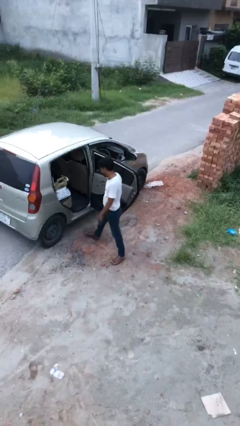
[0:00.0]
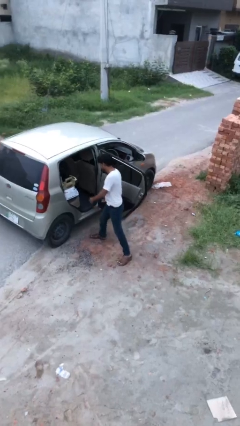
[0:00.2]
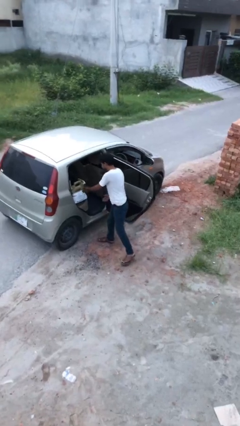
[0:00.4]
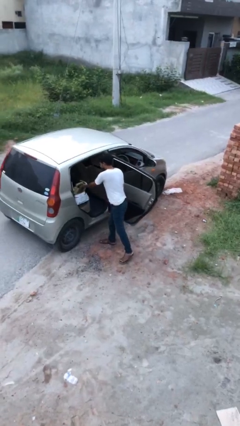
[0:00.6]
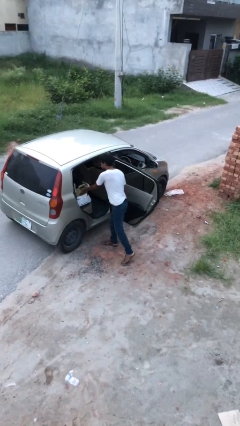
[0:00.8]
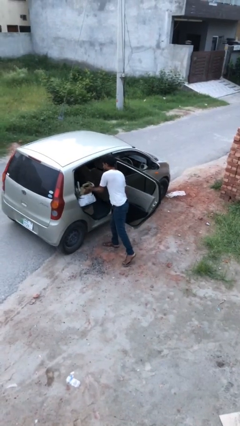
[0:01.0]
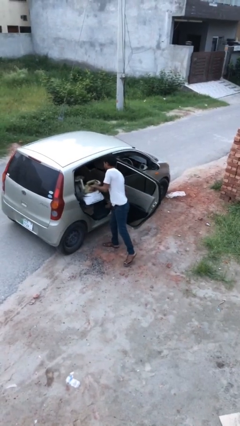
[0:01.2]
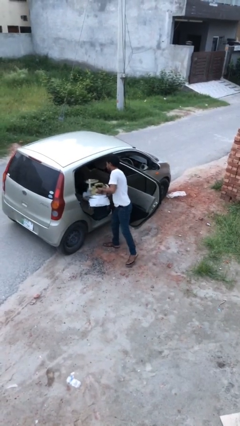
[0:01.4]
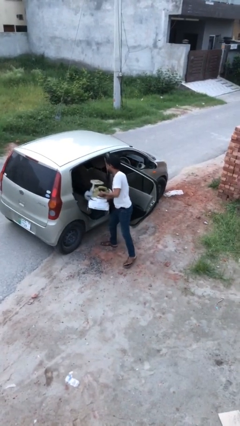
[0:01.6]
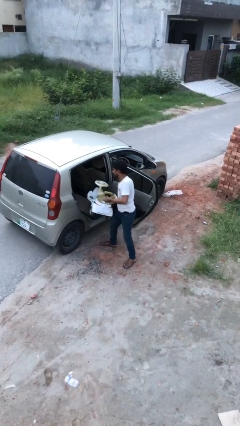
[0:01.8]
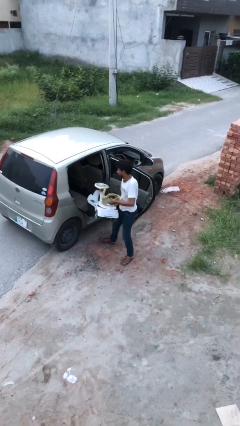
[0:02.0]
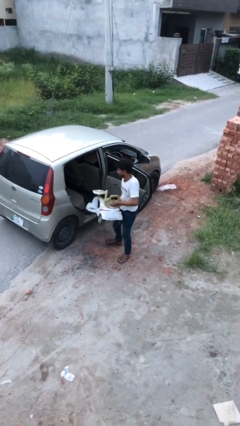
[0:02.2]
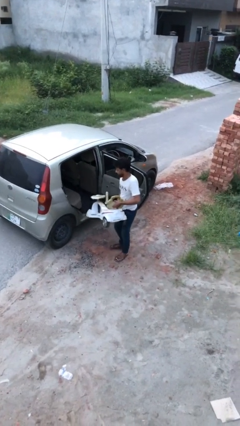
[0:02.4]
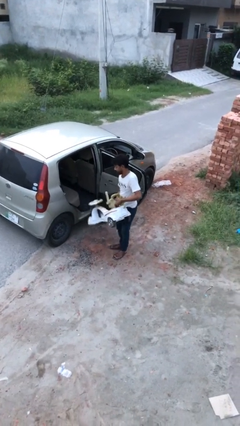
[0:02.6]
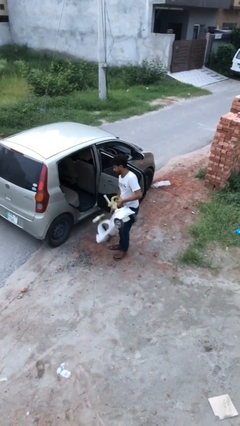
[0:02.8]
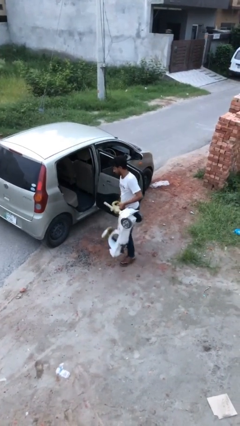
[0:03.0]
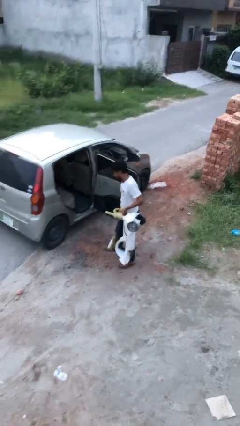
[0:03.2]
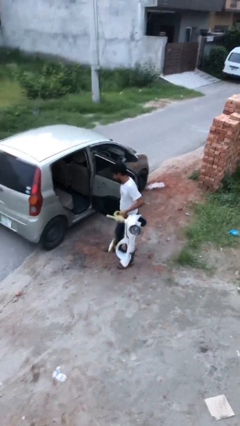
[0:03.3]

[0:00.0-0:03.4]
person unloads car

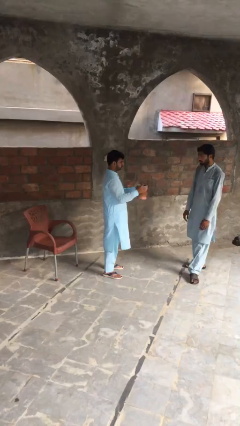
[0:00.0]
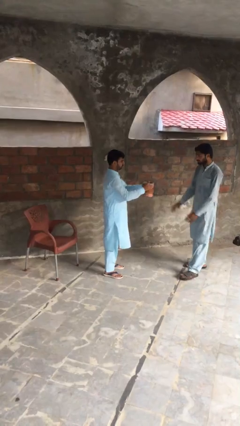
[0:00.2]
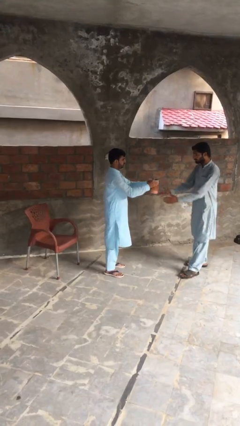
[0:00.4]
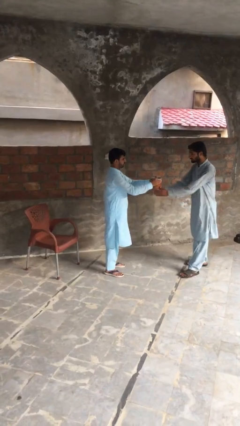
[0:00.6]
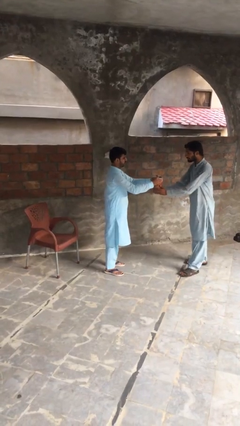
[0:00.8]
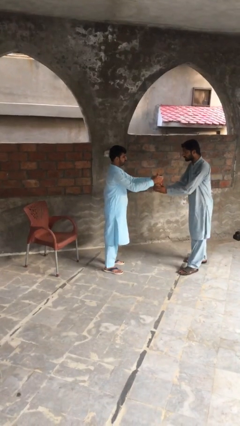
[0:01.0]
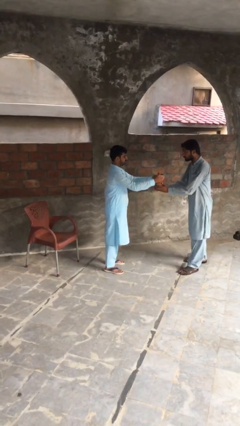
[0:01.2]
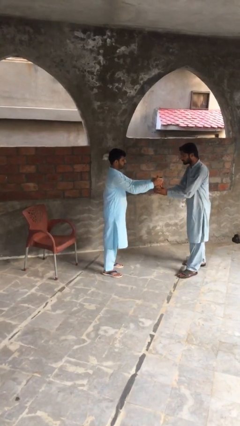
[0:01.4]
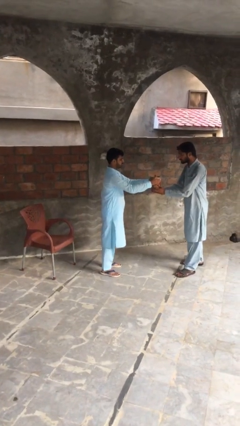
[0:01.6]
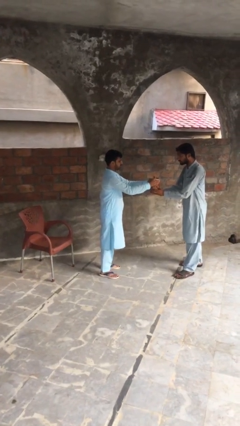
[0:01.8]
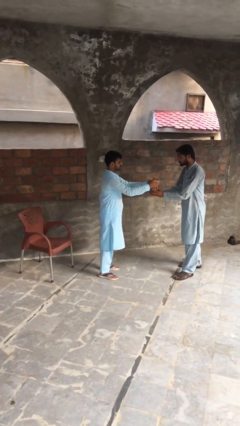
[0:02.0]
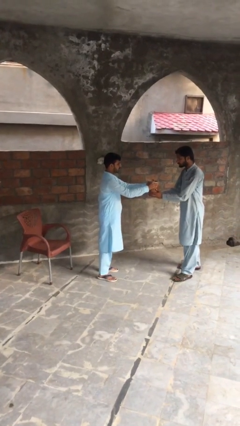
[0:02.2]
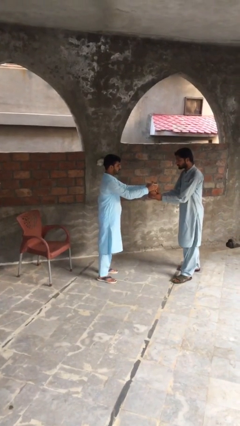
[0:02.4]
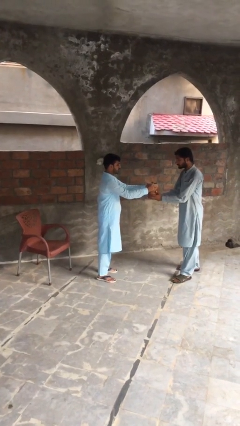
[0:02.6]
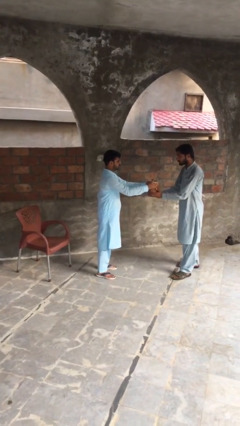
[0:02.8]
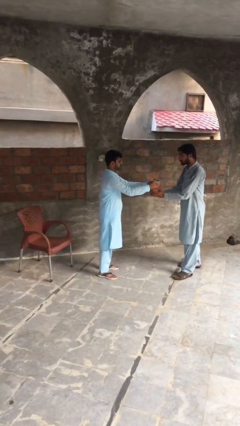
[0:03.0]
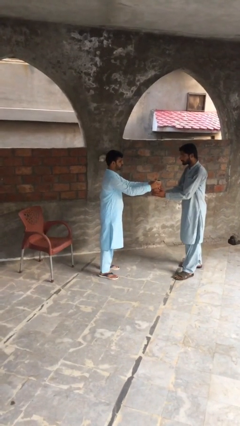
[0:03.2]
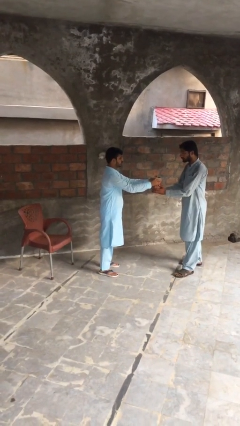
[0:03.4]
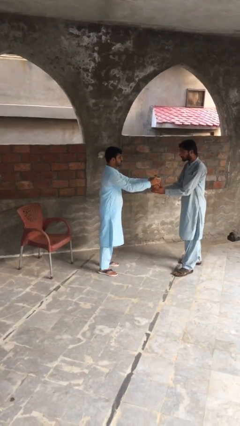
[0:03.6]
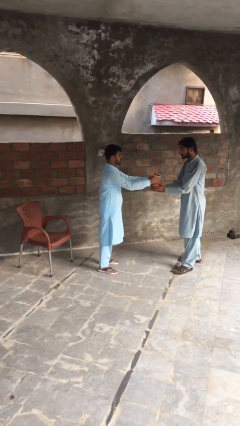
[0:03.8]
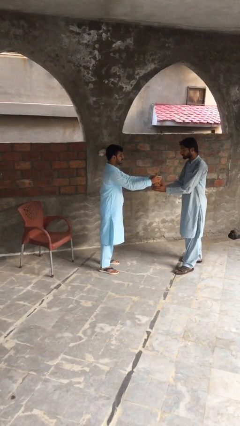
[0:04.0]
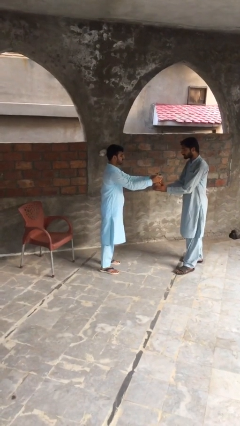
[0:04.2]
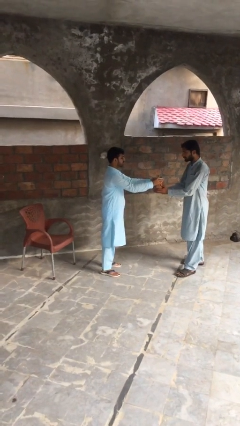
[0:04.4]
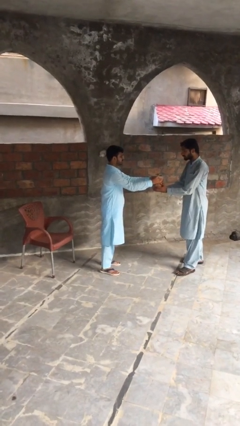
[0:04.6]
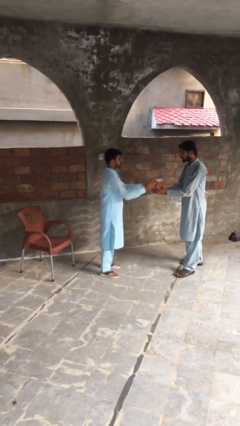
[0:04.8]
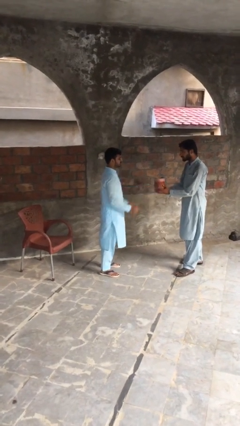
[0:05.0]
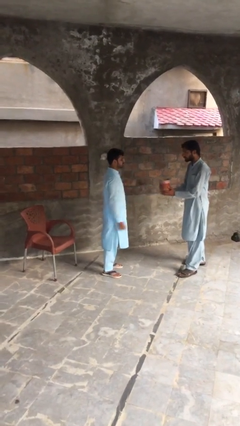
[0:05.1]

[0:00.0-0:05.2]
person transfers object to person

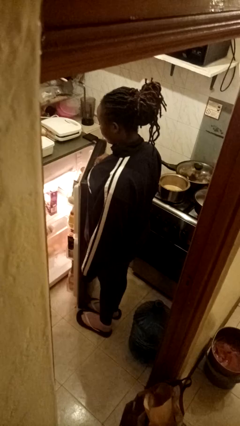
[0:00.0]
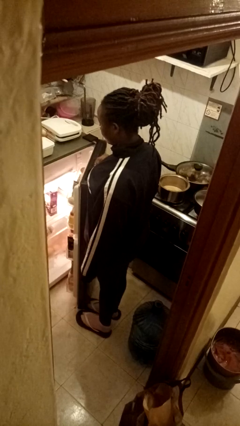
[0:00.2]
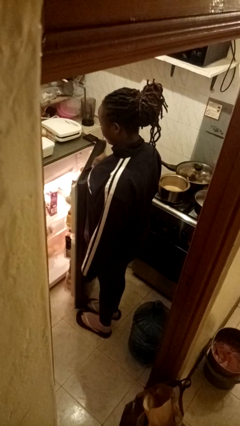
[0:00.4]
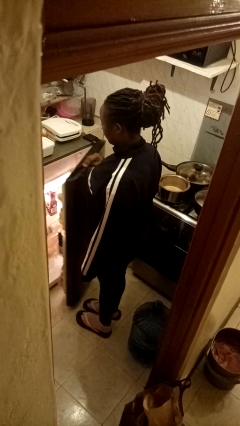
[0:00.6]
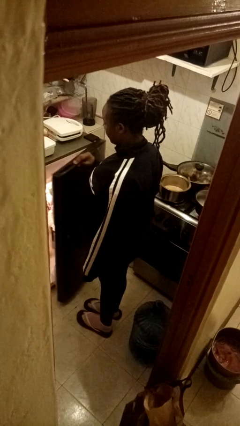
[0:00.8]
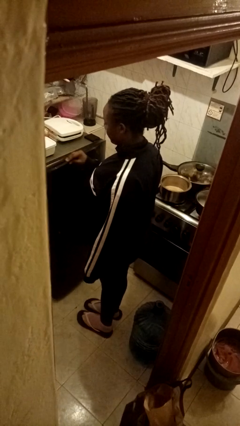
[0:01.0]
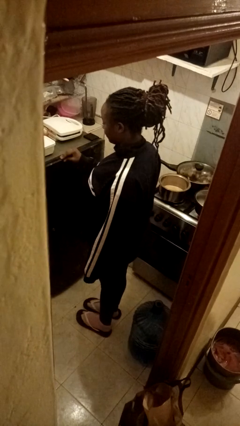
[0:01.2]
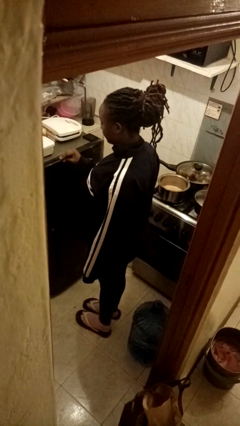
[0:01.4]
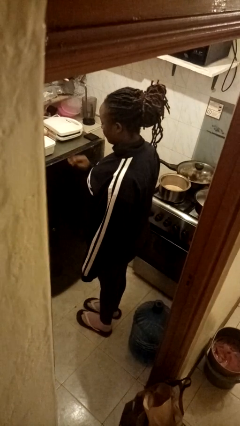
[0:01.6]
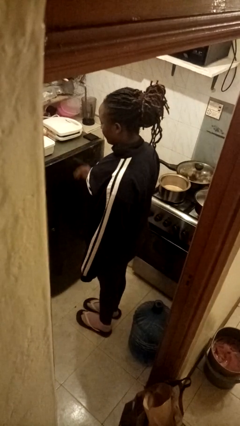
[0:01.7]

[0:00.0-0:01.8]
person closes refrigerator

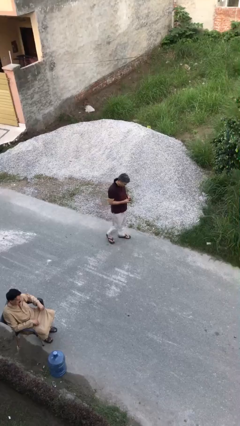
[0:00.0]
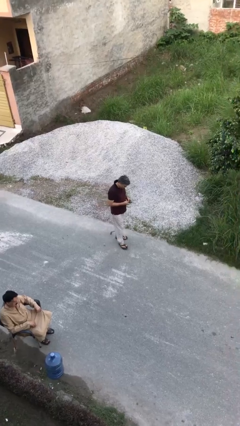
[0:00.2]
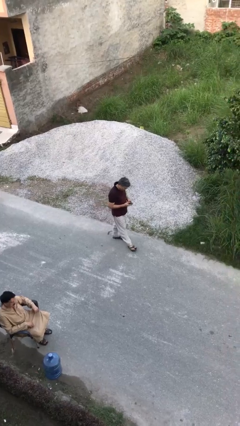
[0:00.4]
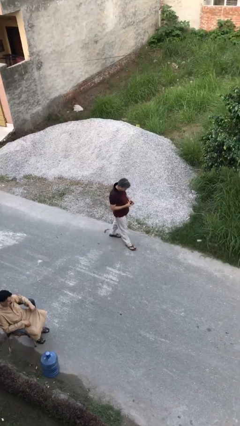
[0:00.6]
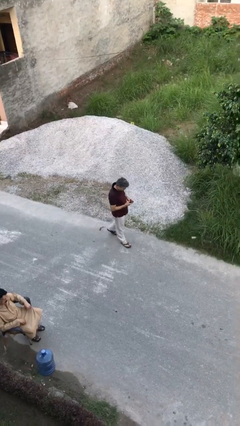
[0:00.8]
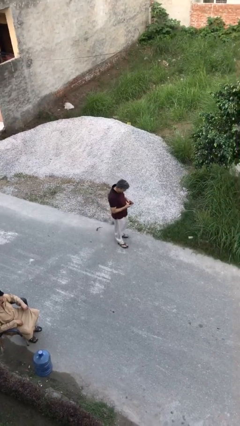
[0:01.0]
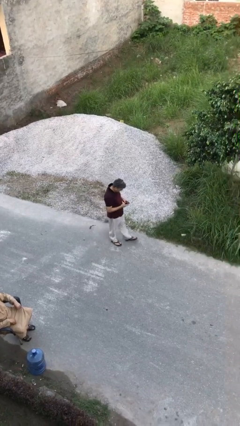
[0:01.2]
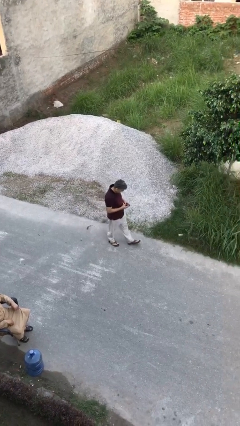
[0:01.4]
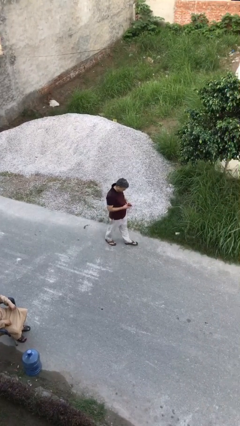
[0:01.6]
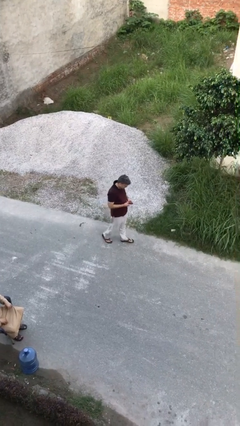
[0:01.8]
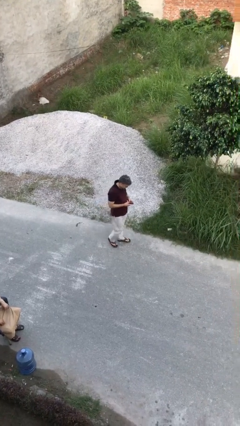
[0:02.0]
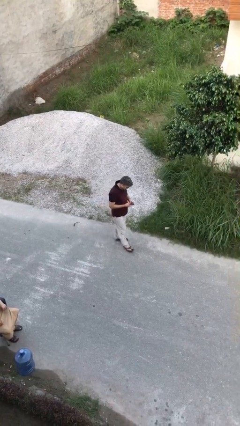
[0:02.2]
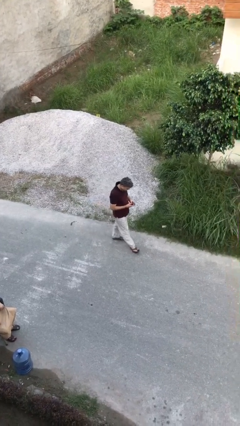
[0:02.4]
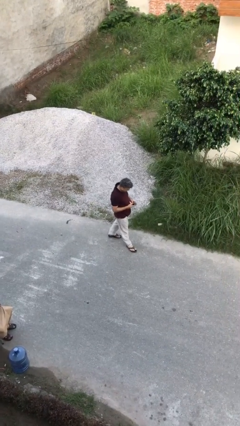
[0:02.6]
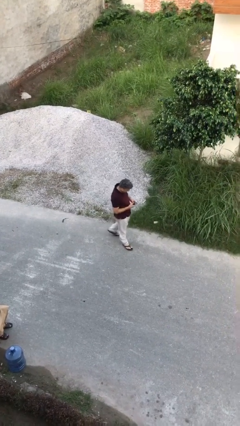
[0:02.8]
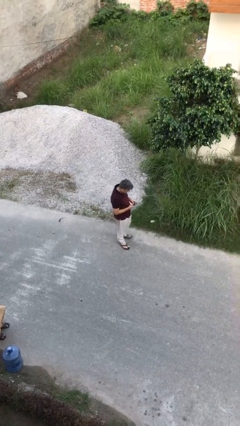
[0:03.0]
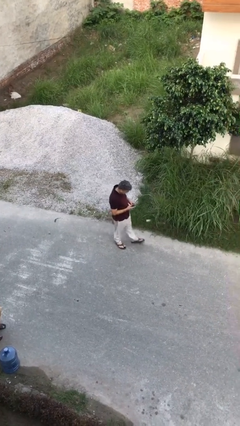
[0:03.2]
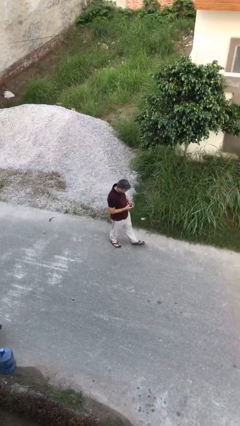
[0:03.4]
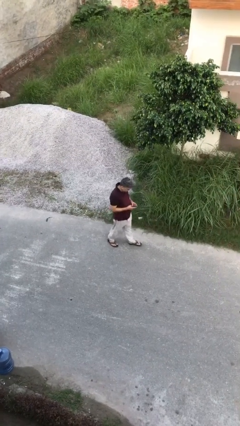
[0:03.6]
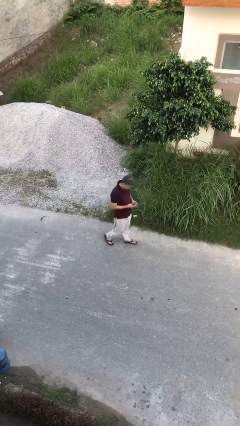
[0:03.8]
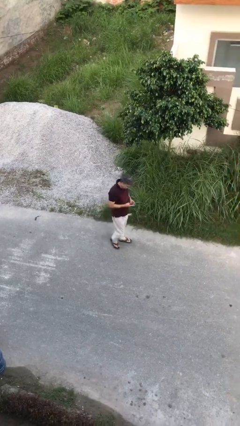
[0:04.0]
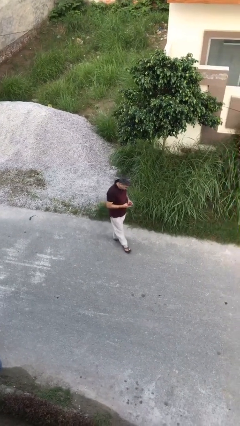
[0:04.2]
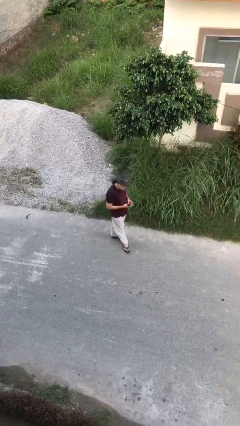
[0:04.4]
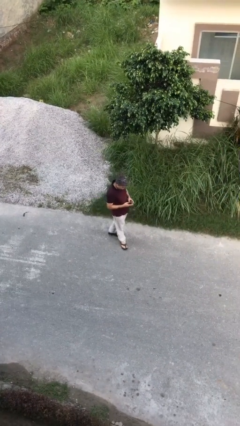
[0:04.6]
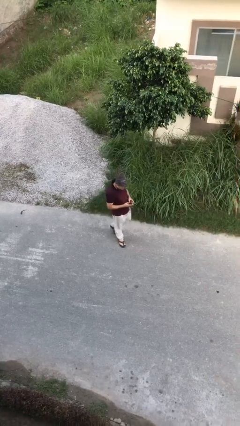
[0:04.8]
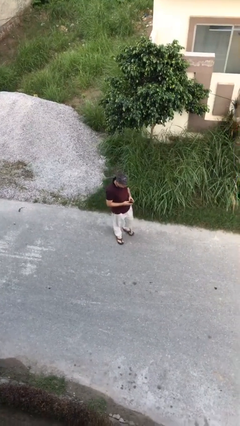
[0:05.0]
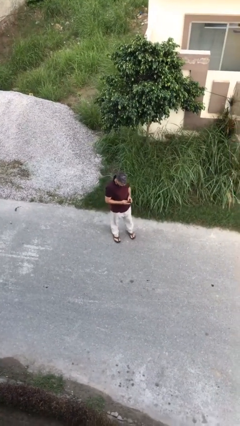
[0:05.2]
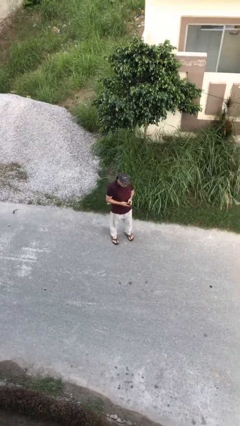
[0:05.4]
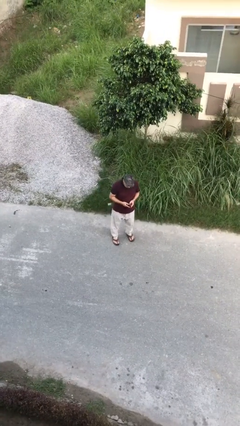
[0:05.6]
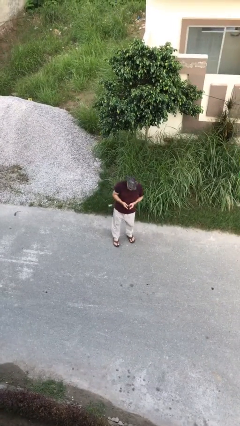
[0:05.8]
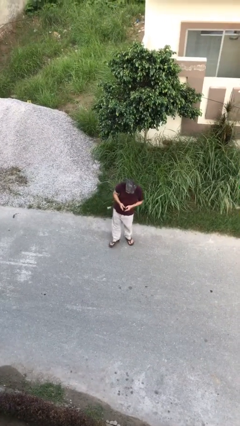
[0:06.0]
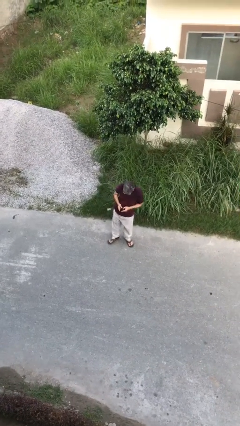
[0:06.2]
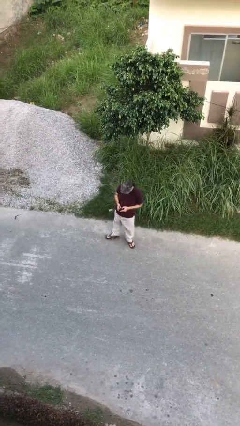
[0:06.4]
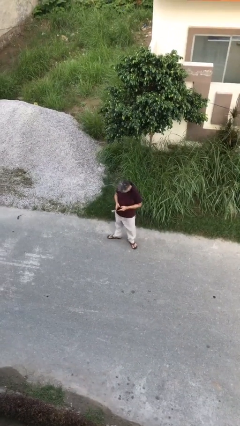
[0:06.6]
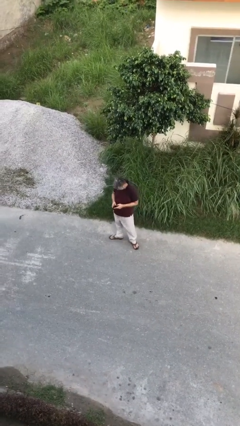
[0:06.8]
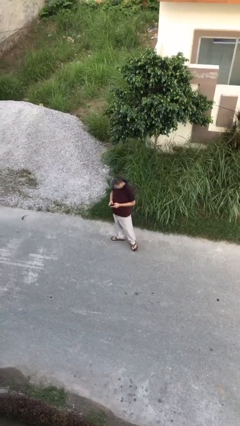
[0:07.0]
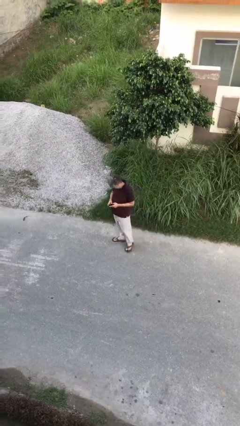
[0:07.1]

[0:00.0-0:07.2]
person texts on phone

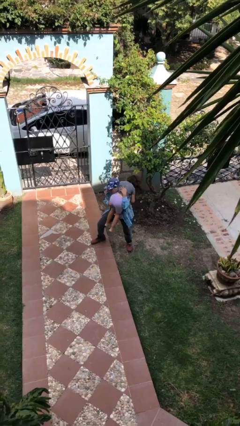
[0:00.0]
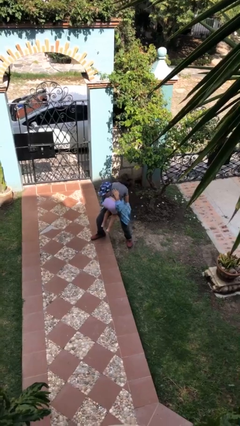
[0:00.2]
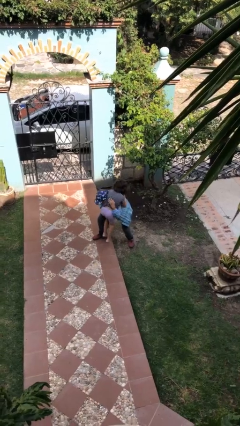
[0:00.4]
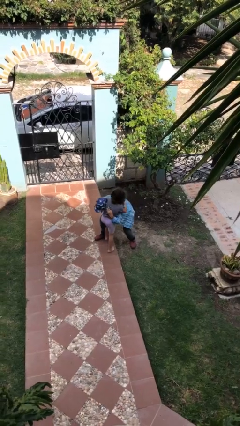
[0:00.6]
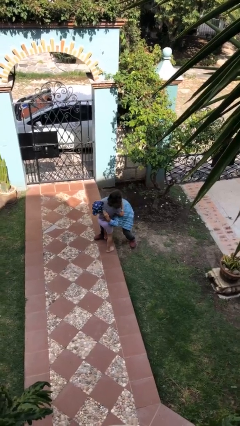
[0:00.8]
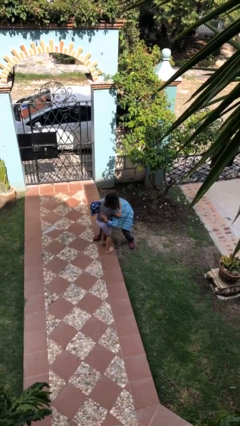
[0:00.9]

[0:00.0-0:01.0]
person puts down person
